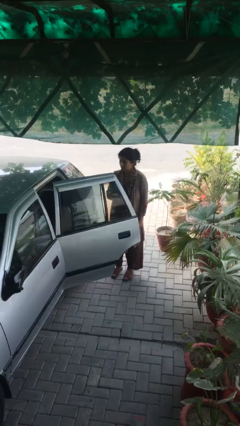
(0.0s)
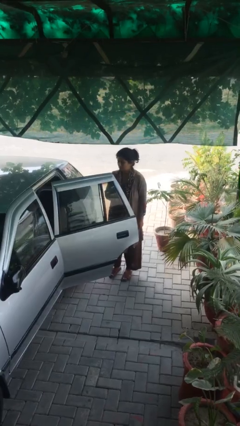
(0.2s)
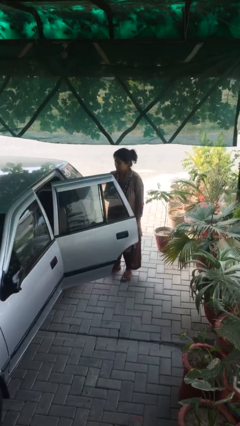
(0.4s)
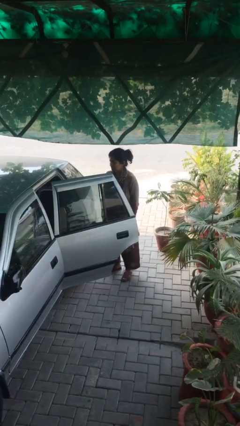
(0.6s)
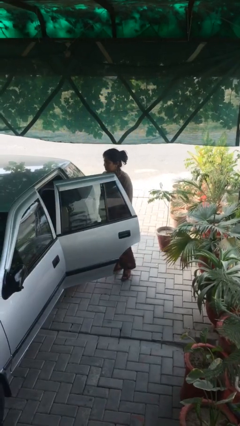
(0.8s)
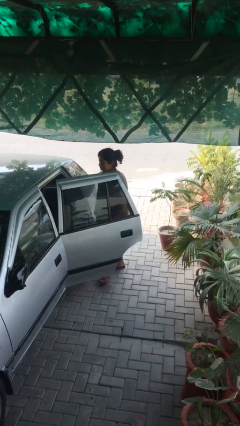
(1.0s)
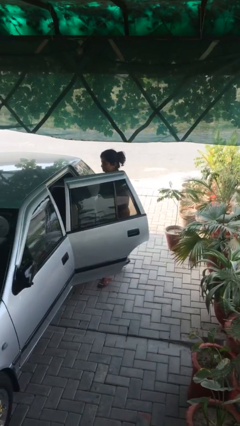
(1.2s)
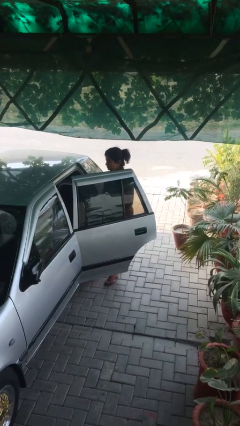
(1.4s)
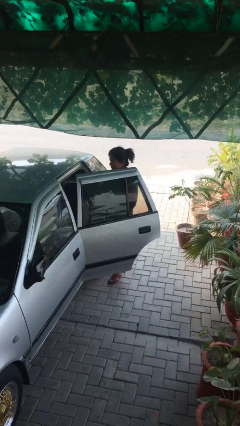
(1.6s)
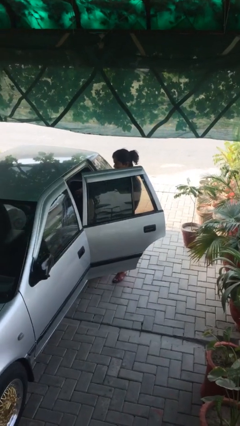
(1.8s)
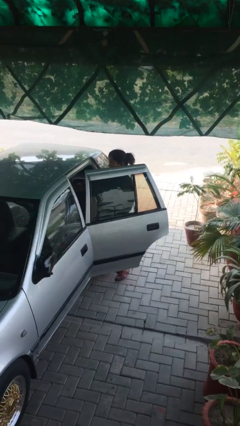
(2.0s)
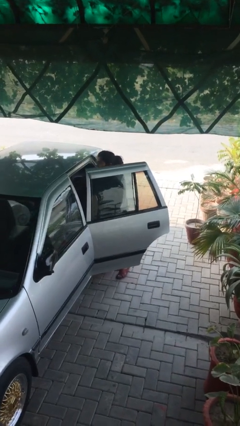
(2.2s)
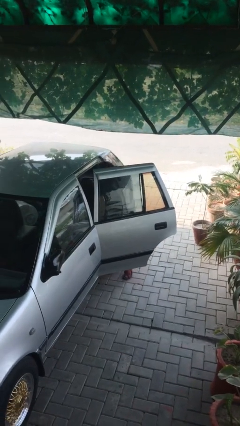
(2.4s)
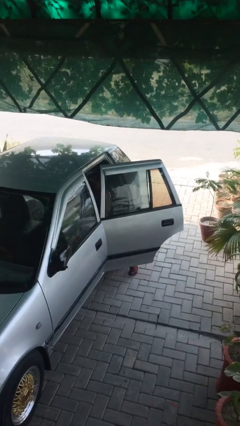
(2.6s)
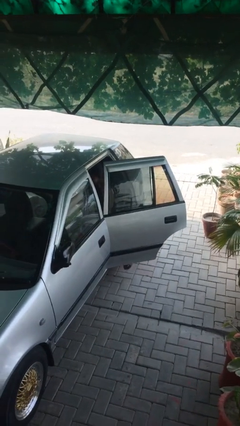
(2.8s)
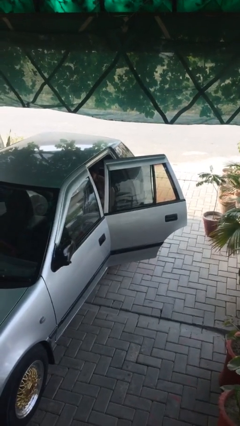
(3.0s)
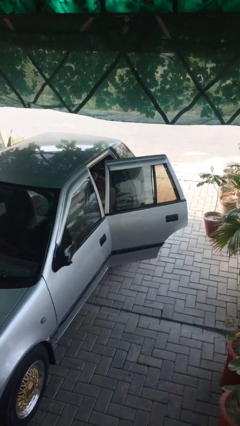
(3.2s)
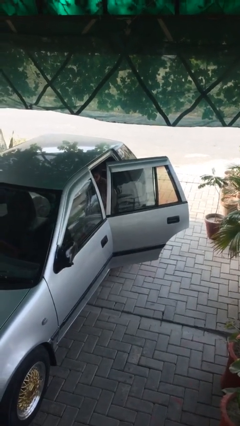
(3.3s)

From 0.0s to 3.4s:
person enters car

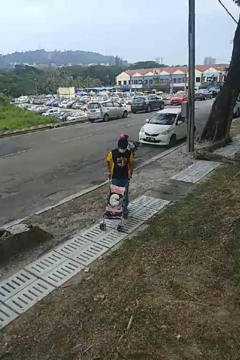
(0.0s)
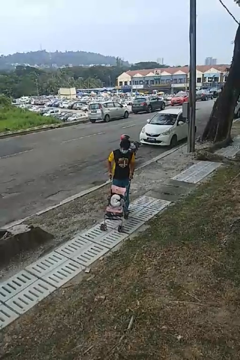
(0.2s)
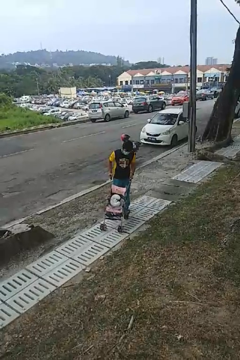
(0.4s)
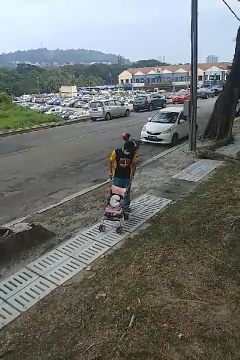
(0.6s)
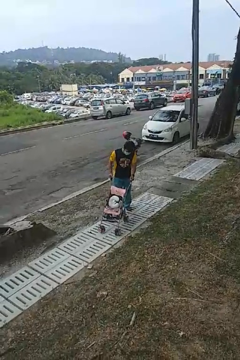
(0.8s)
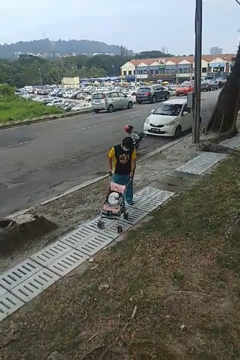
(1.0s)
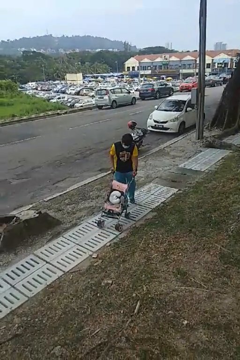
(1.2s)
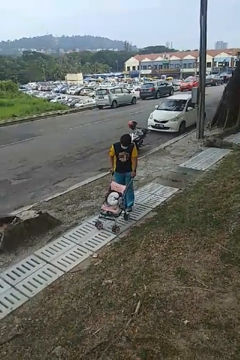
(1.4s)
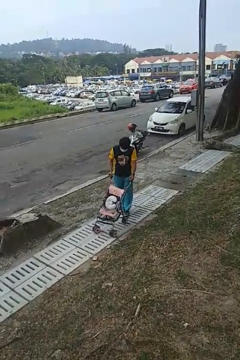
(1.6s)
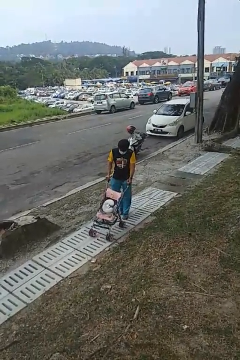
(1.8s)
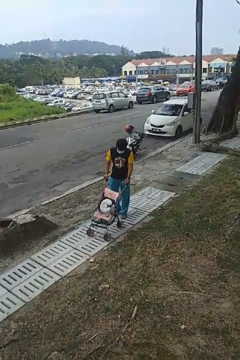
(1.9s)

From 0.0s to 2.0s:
person pushes wheeled cart

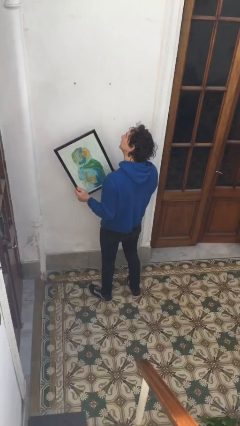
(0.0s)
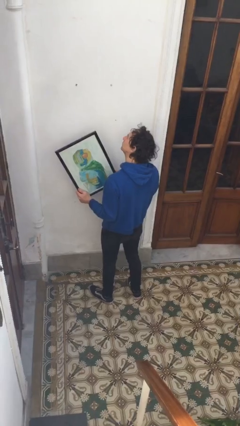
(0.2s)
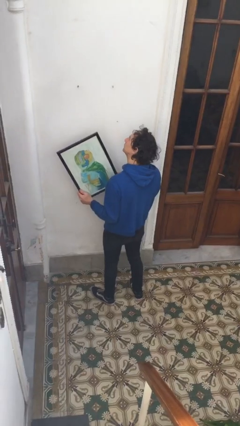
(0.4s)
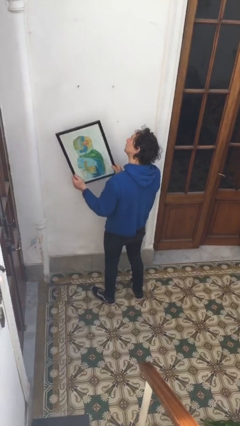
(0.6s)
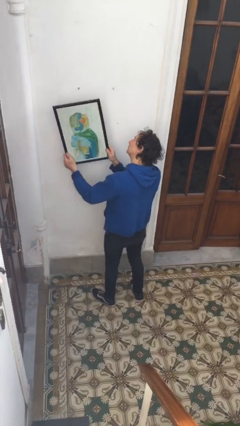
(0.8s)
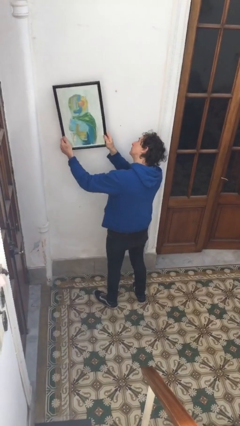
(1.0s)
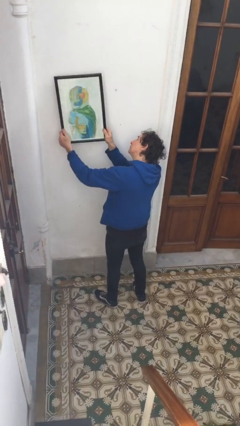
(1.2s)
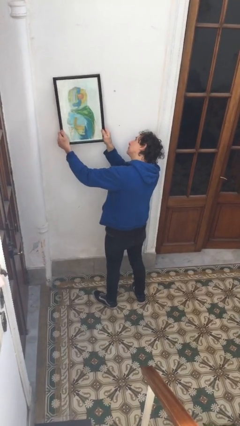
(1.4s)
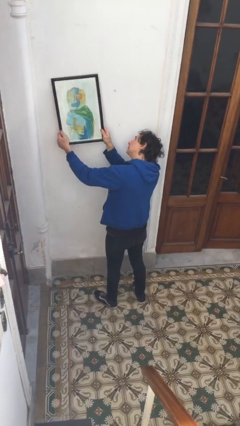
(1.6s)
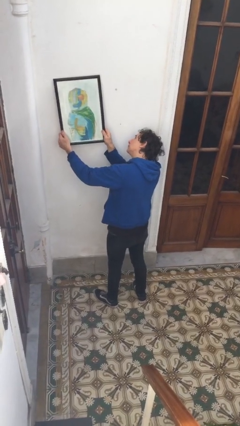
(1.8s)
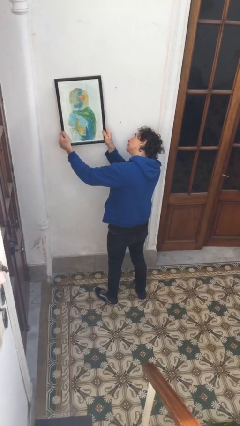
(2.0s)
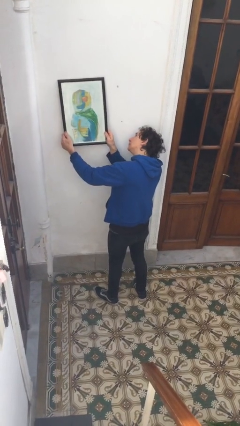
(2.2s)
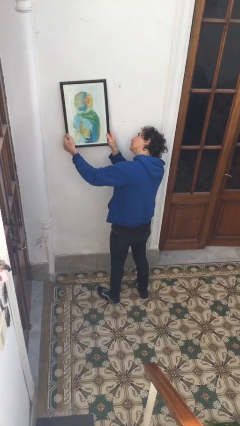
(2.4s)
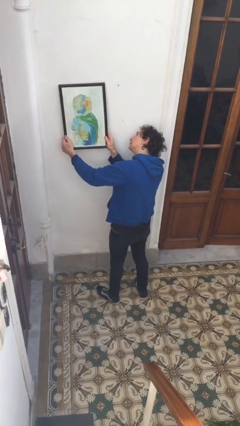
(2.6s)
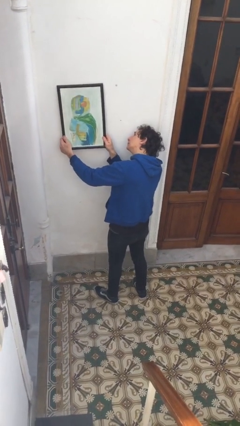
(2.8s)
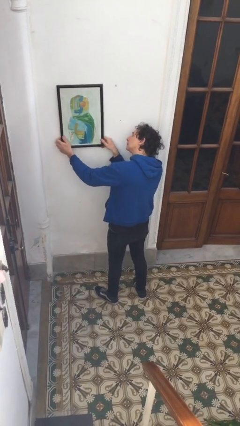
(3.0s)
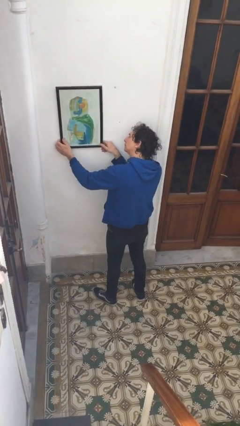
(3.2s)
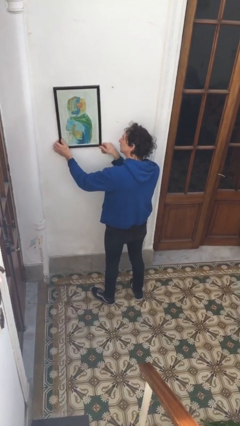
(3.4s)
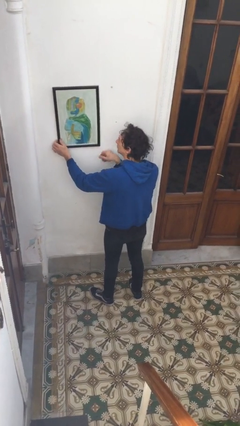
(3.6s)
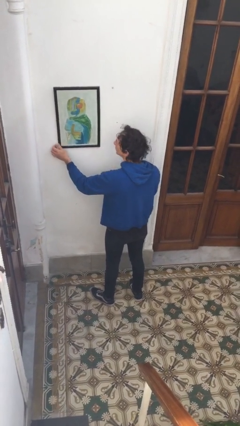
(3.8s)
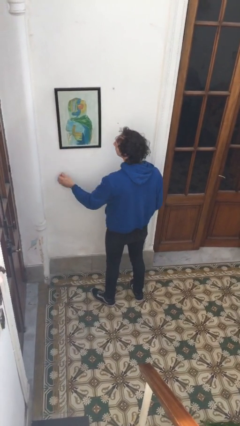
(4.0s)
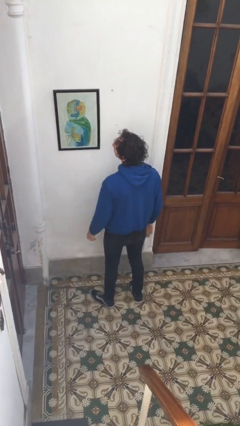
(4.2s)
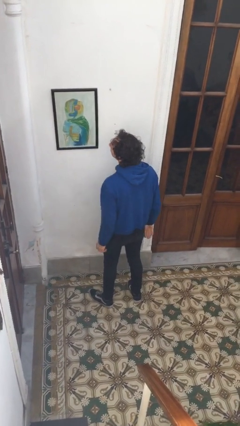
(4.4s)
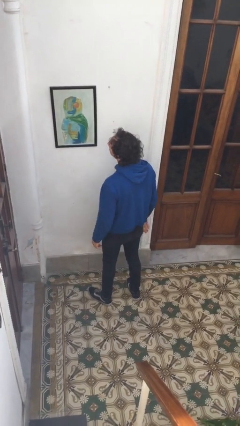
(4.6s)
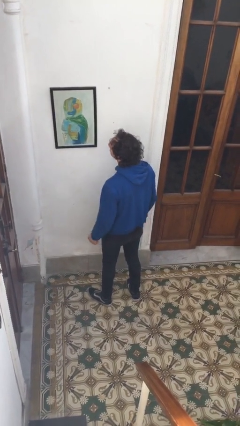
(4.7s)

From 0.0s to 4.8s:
person puts up picture frame

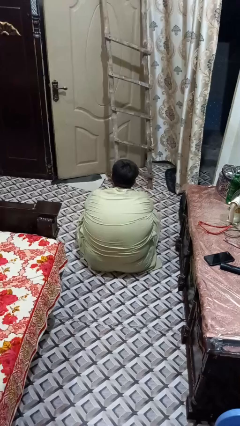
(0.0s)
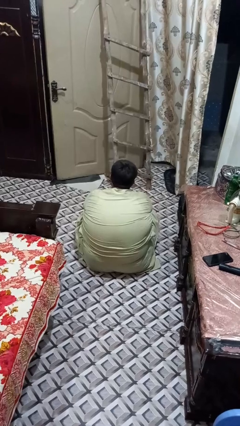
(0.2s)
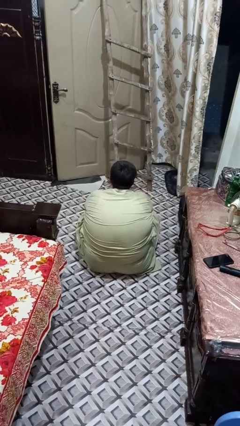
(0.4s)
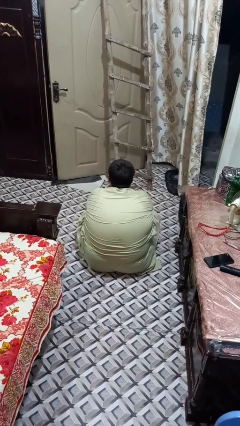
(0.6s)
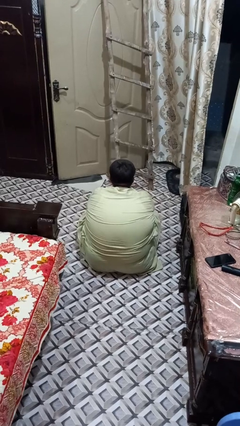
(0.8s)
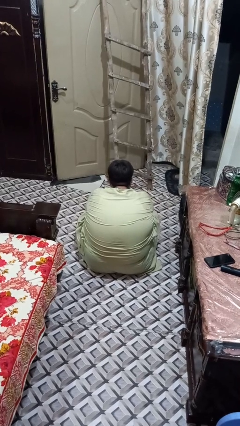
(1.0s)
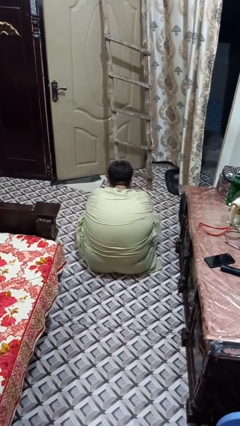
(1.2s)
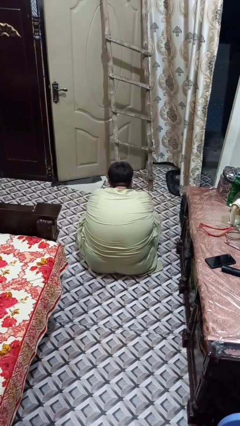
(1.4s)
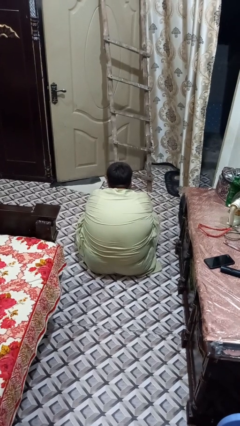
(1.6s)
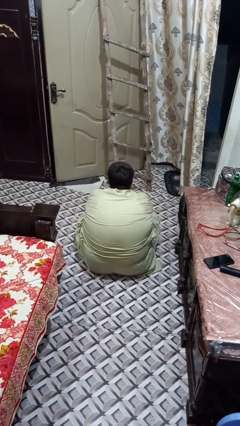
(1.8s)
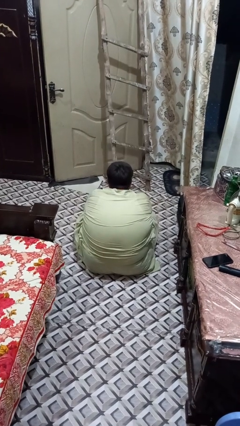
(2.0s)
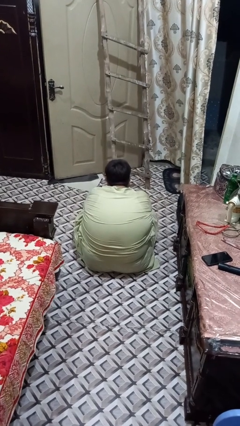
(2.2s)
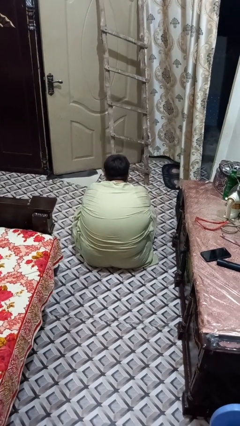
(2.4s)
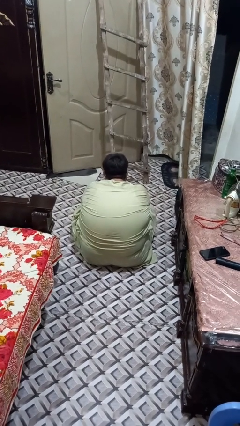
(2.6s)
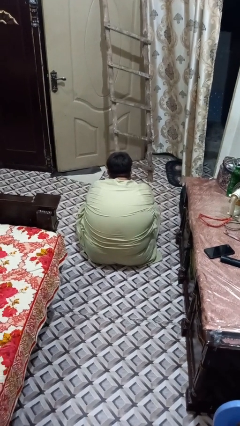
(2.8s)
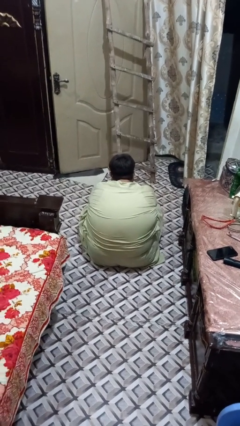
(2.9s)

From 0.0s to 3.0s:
person covers face with hands

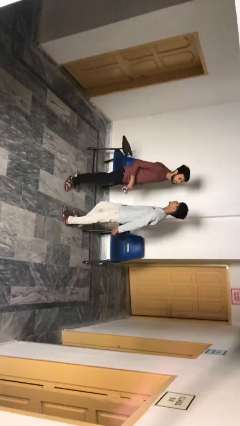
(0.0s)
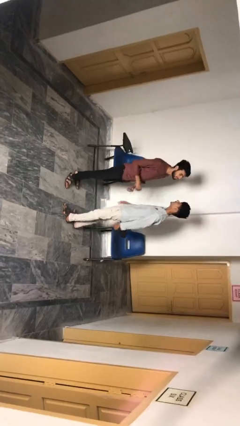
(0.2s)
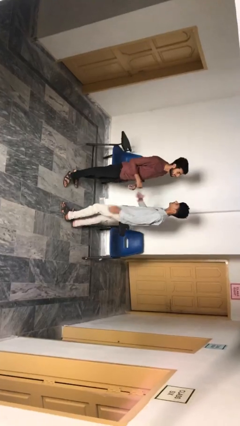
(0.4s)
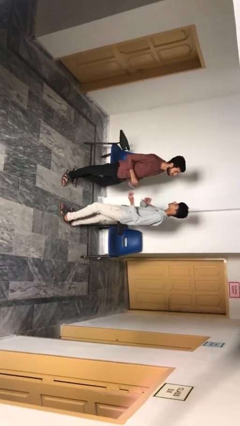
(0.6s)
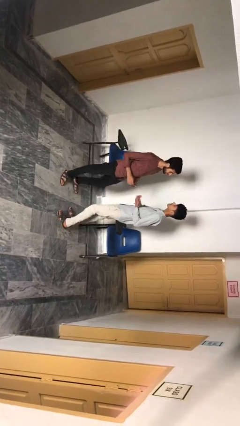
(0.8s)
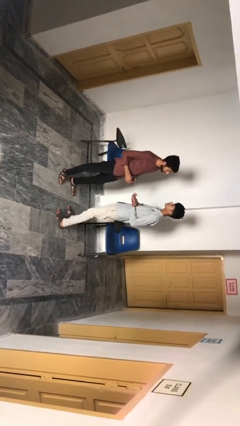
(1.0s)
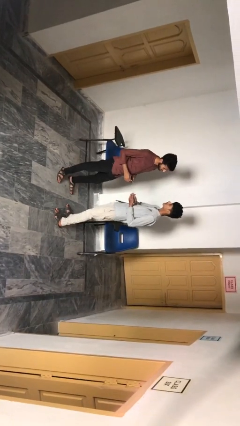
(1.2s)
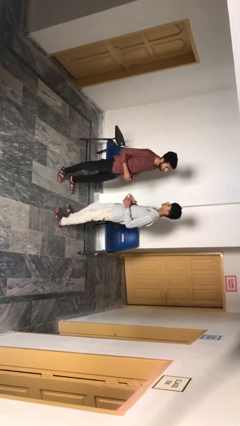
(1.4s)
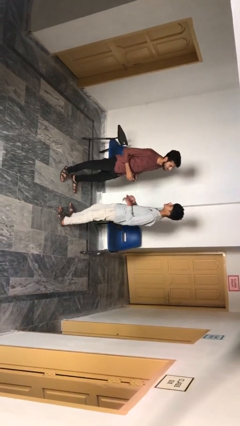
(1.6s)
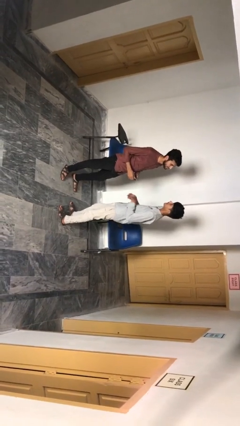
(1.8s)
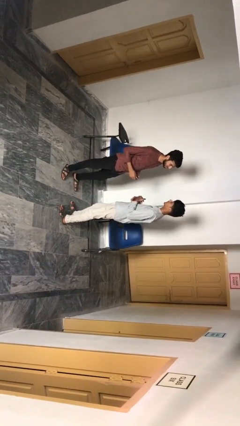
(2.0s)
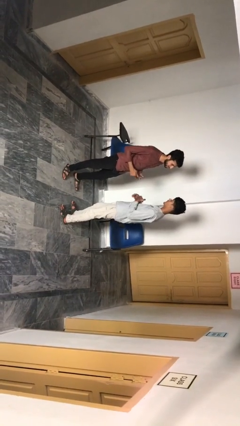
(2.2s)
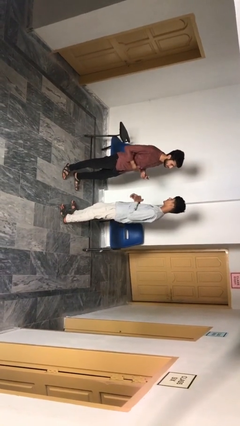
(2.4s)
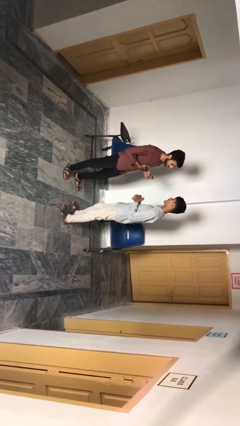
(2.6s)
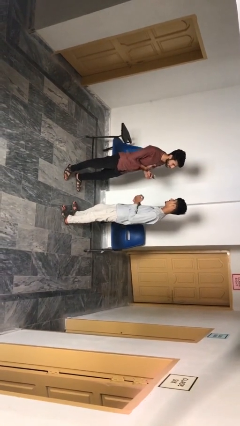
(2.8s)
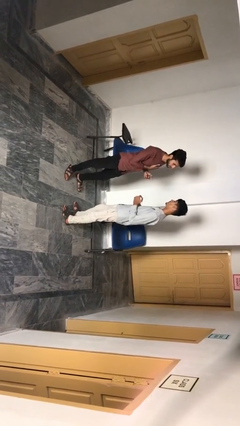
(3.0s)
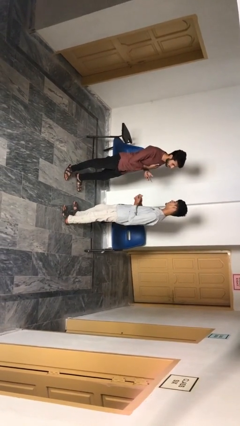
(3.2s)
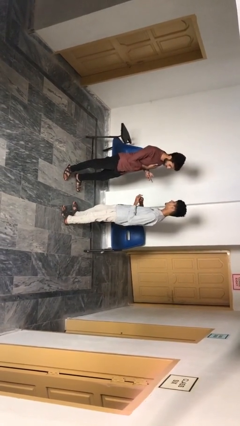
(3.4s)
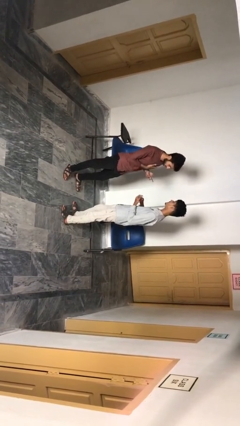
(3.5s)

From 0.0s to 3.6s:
person talks to person

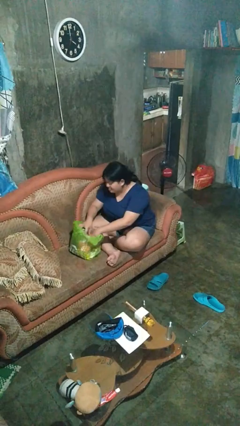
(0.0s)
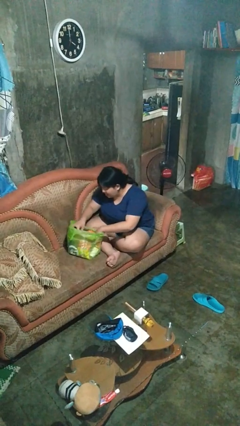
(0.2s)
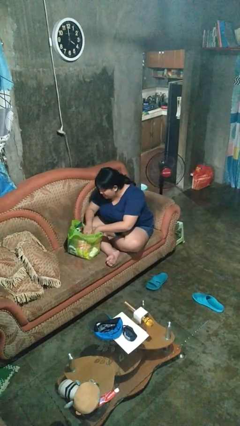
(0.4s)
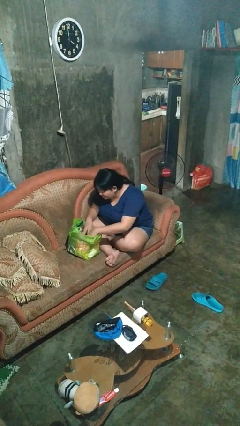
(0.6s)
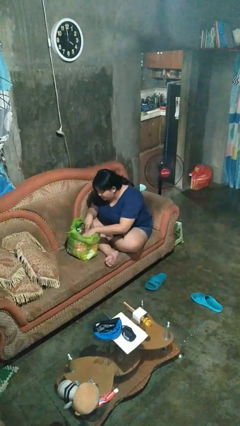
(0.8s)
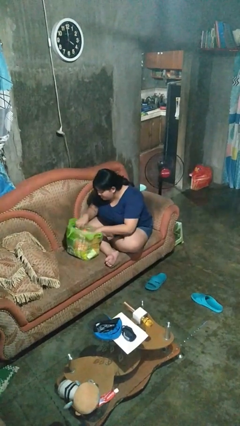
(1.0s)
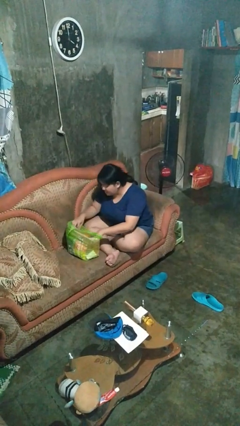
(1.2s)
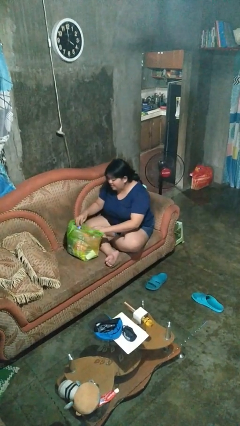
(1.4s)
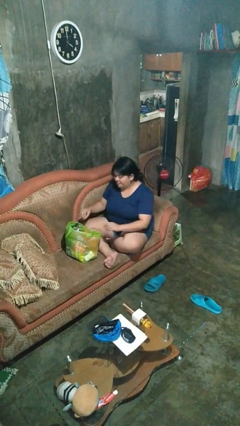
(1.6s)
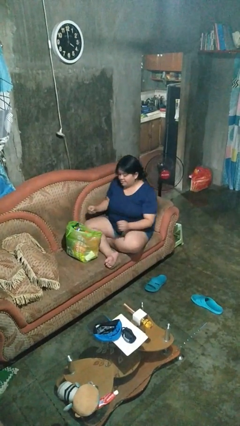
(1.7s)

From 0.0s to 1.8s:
person searches in bag
